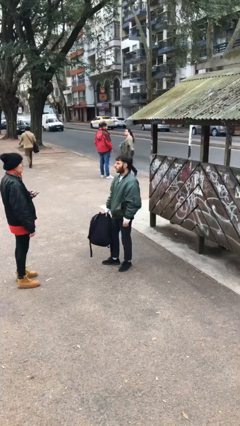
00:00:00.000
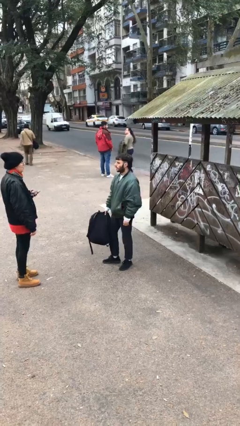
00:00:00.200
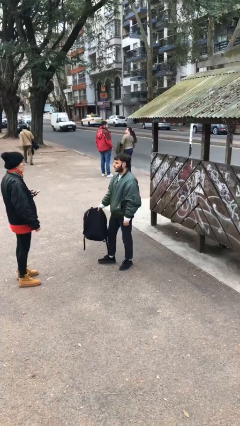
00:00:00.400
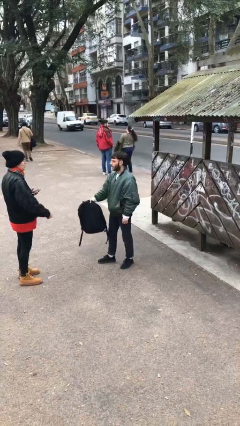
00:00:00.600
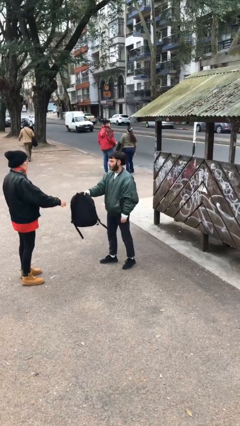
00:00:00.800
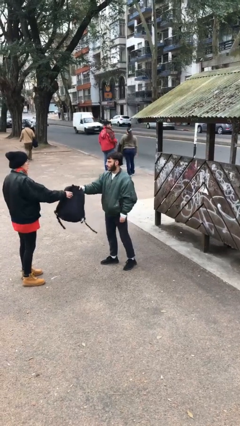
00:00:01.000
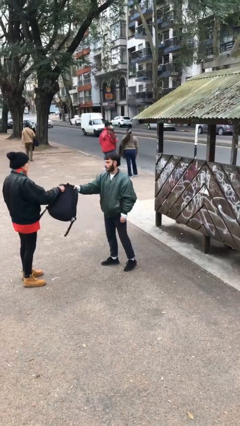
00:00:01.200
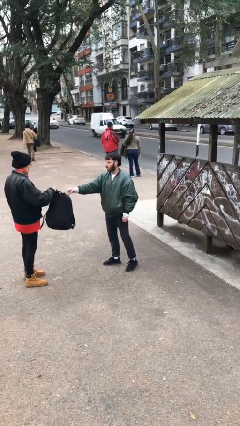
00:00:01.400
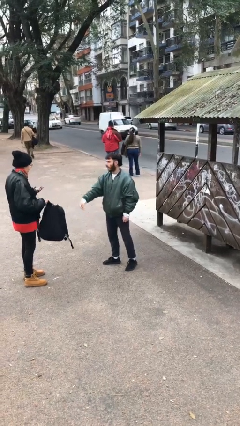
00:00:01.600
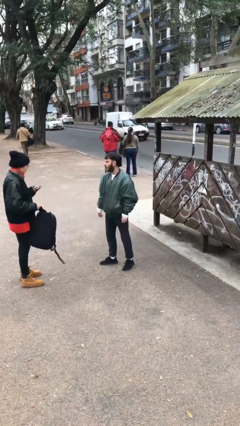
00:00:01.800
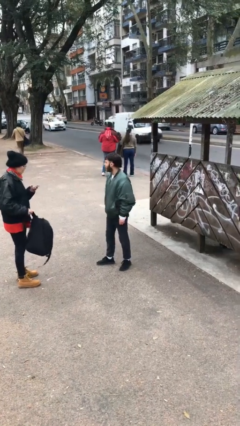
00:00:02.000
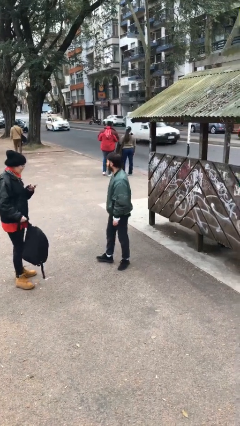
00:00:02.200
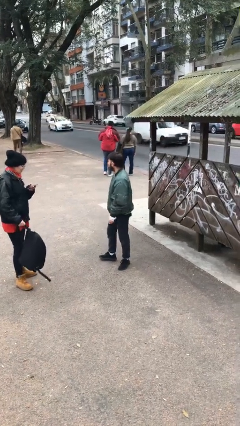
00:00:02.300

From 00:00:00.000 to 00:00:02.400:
person transfers object to person

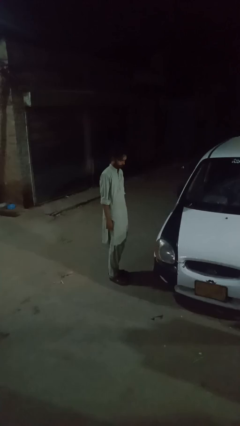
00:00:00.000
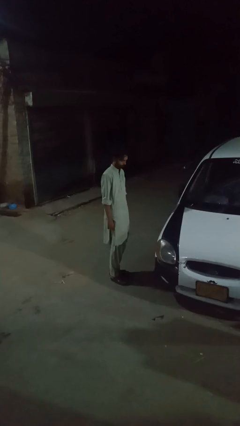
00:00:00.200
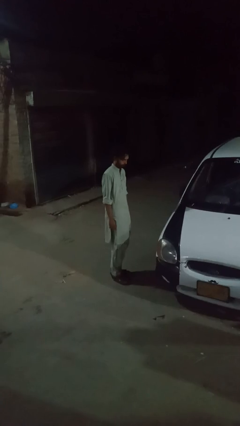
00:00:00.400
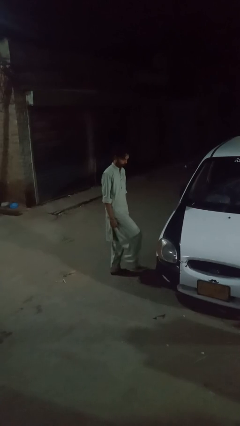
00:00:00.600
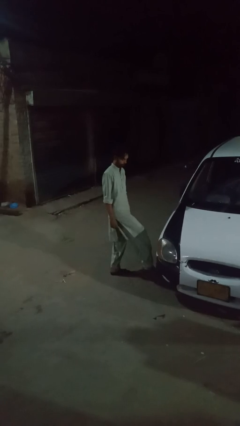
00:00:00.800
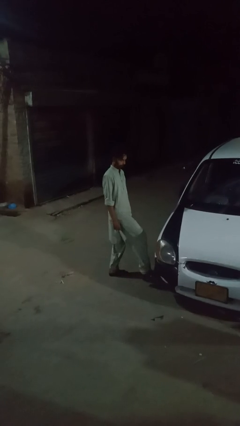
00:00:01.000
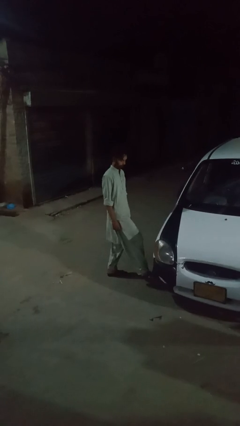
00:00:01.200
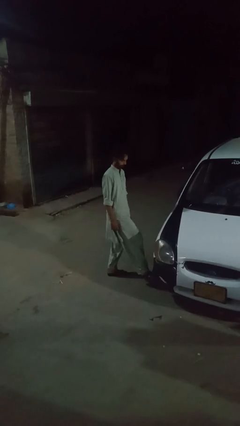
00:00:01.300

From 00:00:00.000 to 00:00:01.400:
person kicks car tires

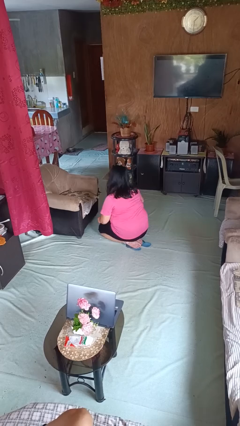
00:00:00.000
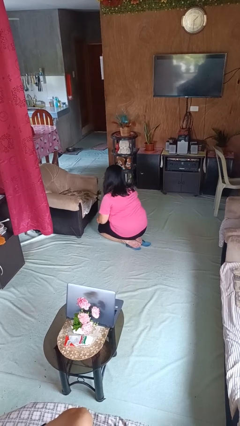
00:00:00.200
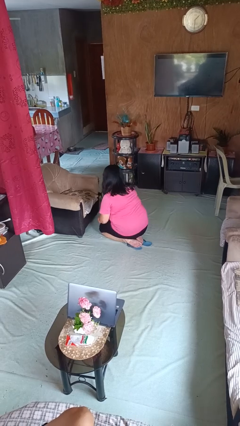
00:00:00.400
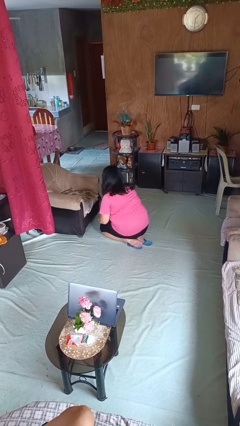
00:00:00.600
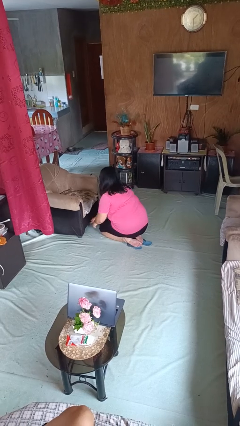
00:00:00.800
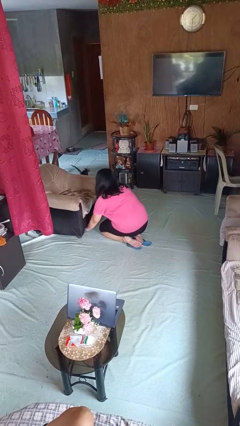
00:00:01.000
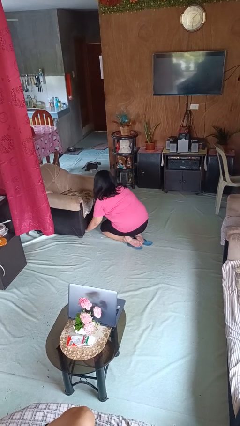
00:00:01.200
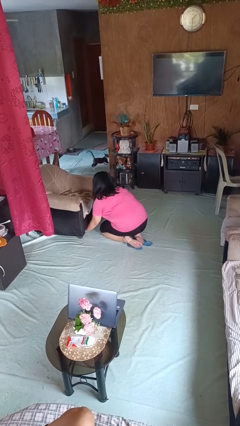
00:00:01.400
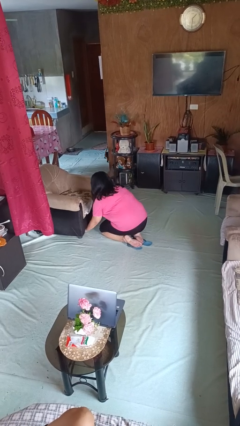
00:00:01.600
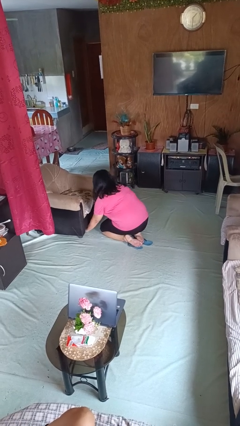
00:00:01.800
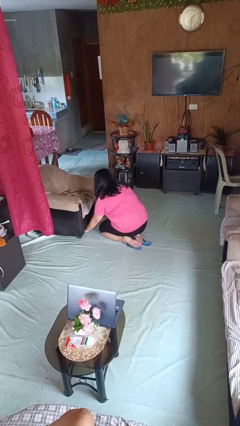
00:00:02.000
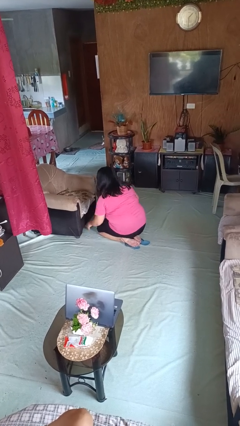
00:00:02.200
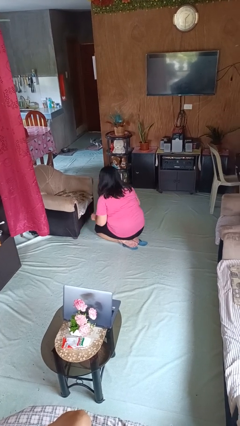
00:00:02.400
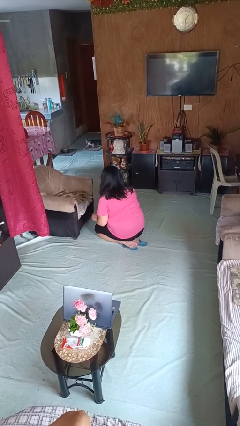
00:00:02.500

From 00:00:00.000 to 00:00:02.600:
person searches under couch

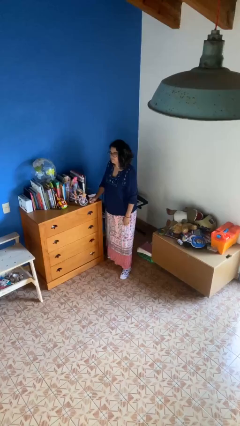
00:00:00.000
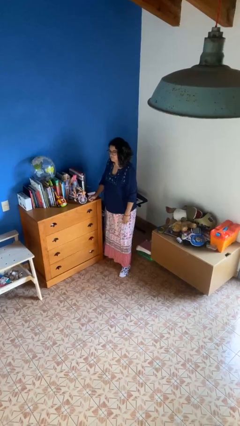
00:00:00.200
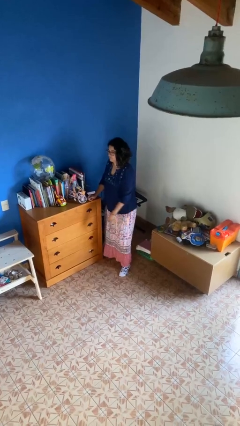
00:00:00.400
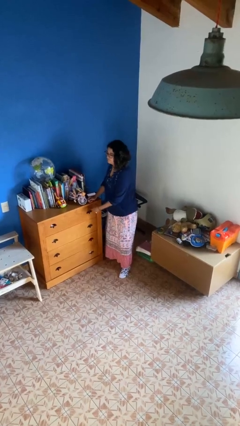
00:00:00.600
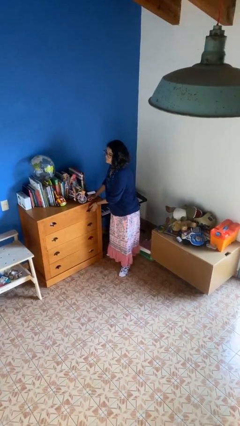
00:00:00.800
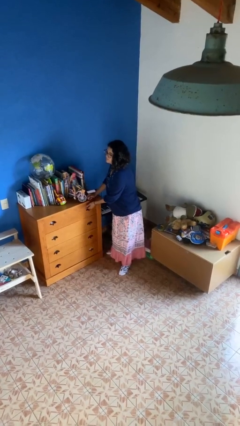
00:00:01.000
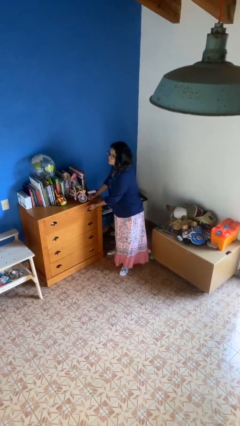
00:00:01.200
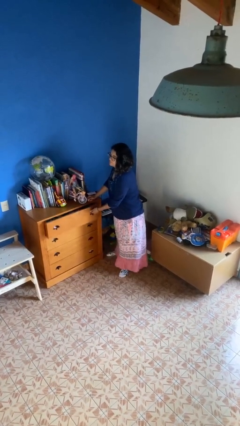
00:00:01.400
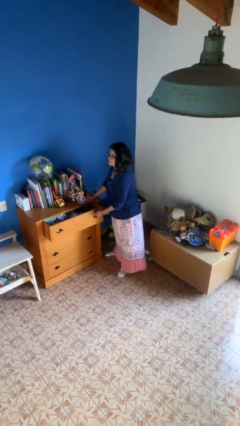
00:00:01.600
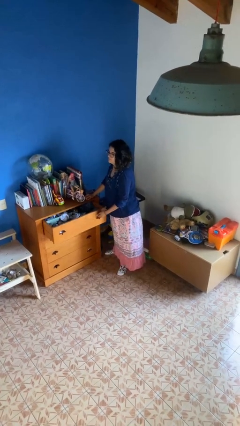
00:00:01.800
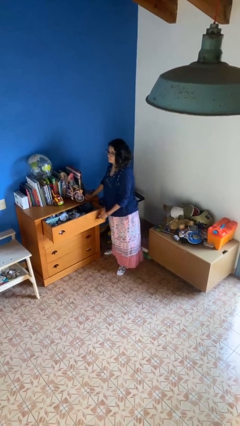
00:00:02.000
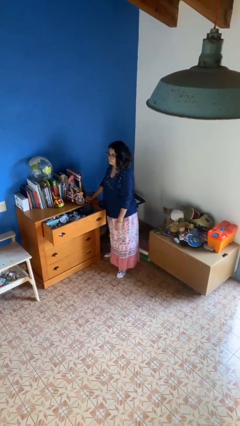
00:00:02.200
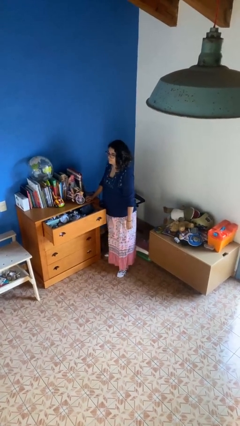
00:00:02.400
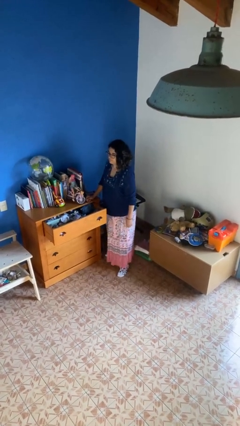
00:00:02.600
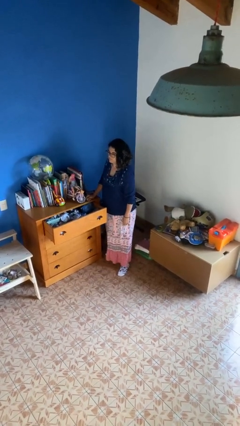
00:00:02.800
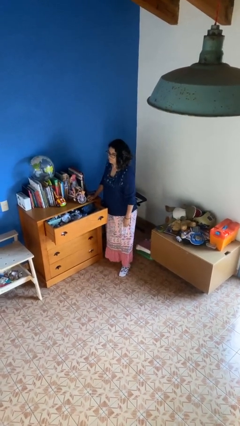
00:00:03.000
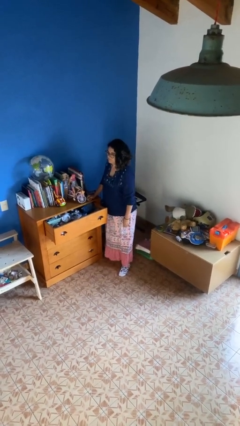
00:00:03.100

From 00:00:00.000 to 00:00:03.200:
person opens dresser drawer

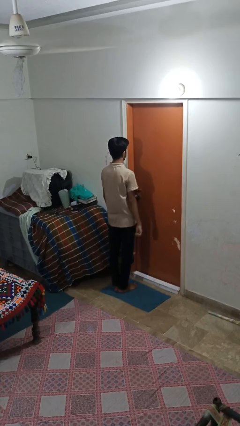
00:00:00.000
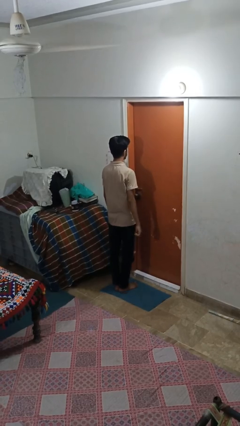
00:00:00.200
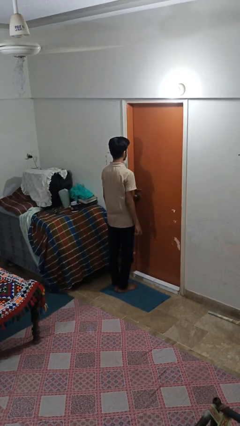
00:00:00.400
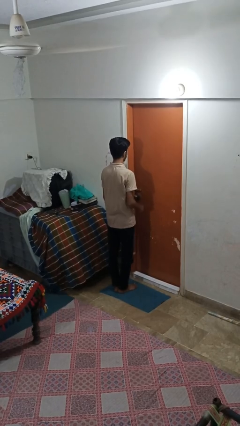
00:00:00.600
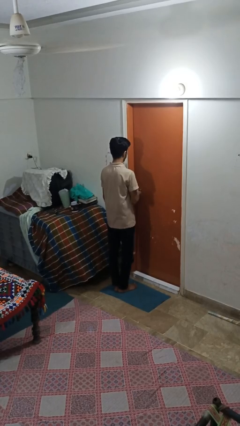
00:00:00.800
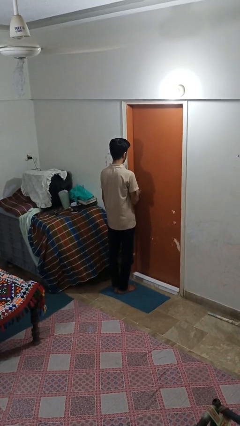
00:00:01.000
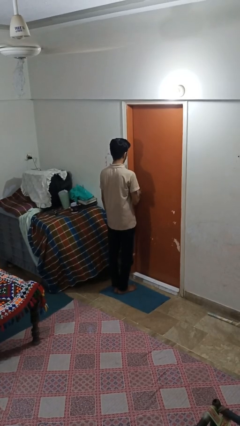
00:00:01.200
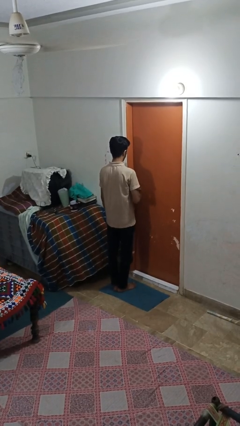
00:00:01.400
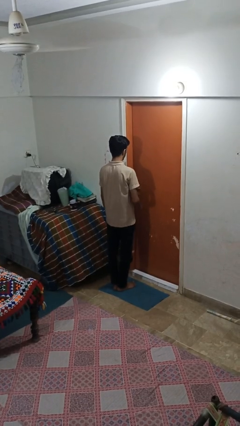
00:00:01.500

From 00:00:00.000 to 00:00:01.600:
person unlocks door with keys

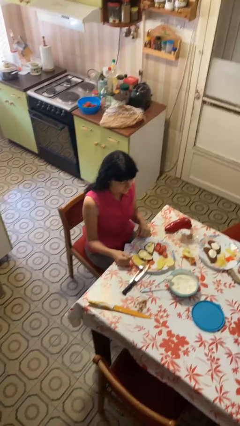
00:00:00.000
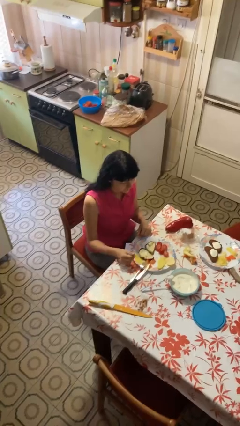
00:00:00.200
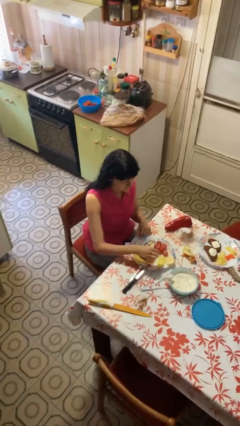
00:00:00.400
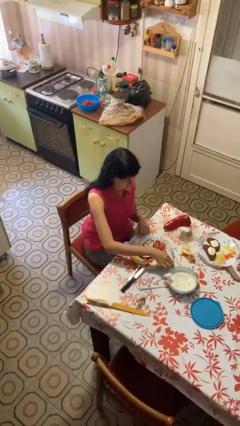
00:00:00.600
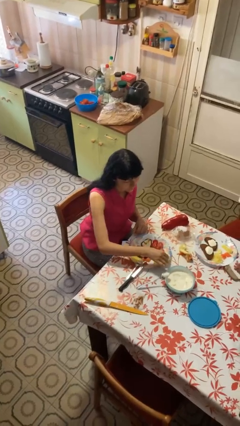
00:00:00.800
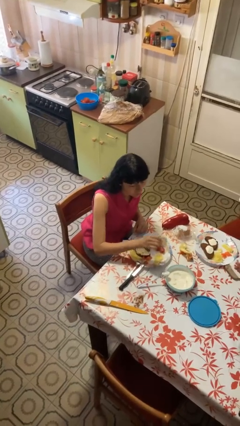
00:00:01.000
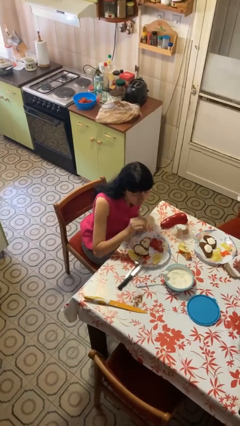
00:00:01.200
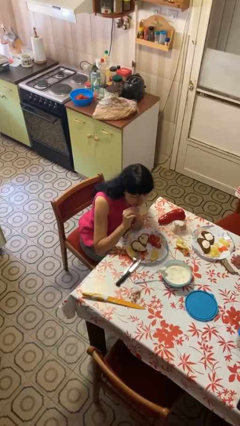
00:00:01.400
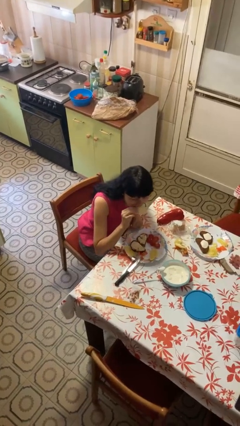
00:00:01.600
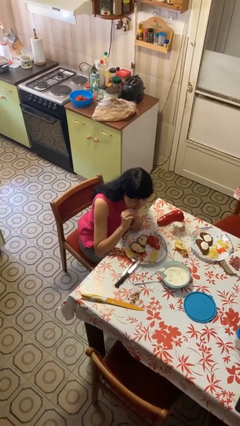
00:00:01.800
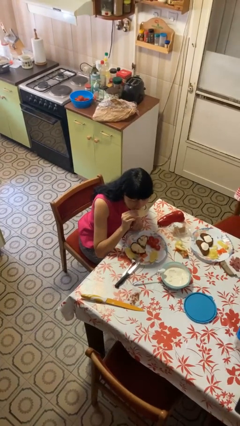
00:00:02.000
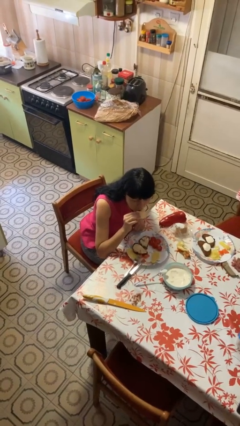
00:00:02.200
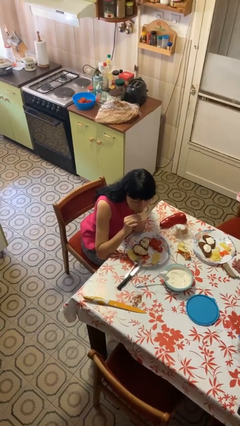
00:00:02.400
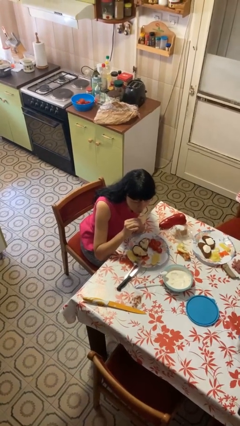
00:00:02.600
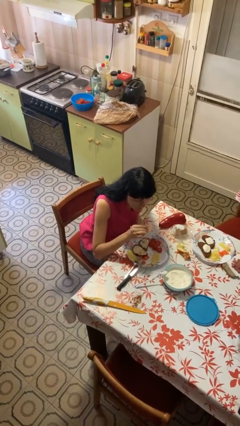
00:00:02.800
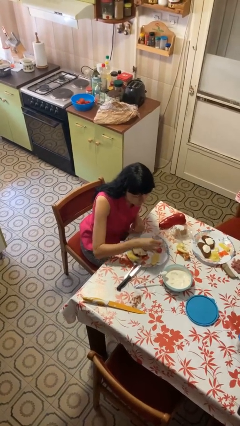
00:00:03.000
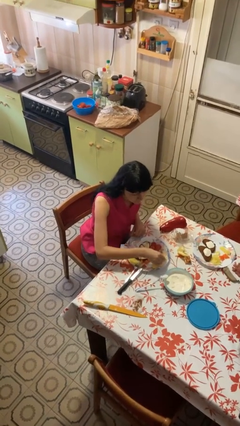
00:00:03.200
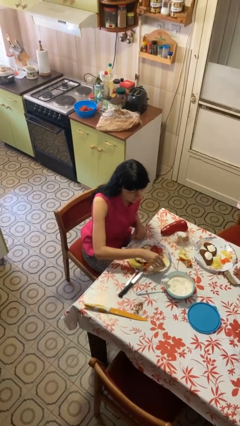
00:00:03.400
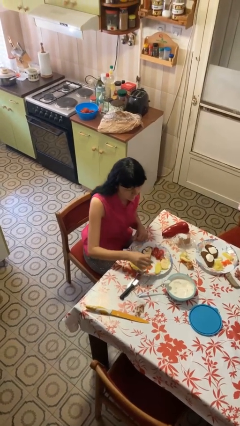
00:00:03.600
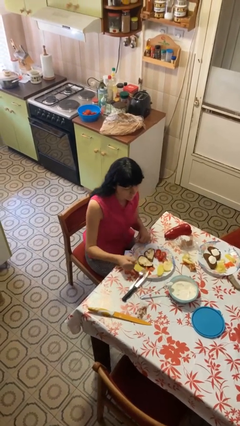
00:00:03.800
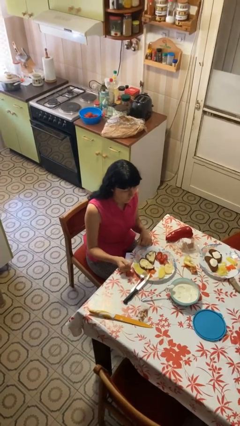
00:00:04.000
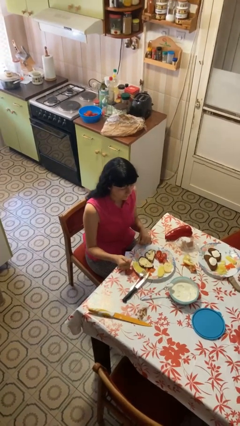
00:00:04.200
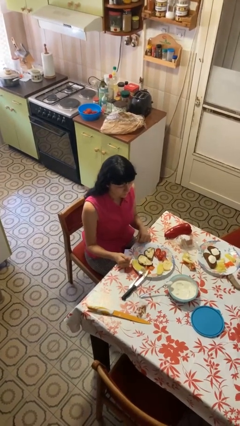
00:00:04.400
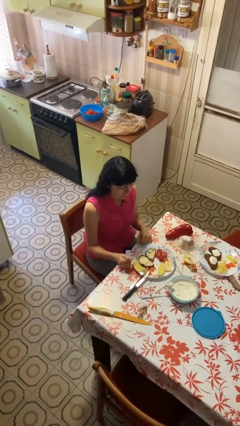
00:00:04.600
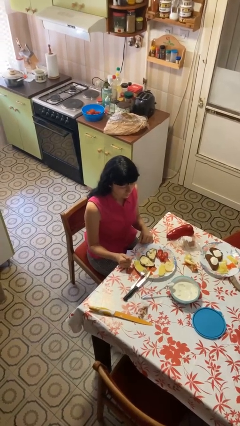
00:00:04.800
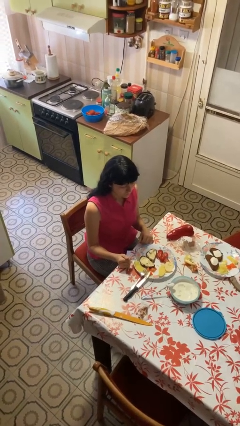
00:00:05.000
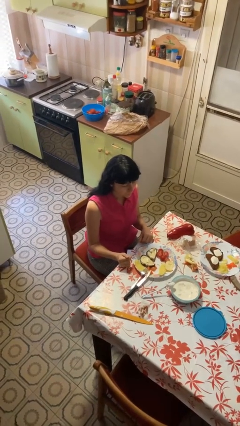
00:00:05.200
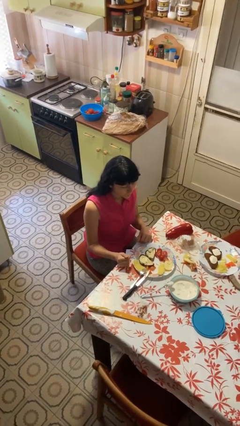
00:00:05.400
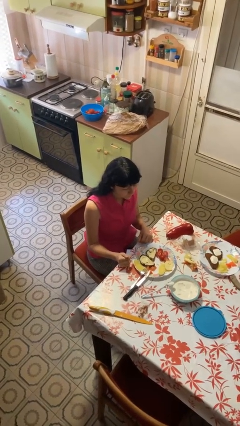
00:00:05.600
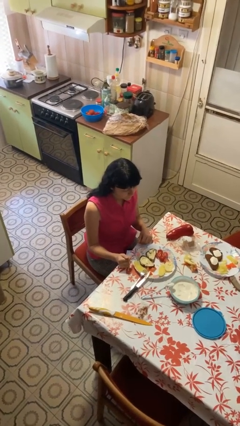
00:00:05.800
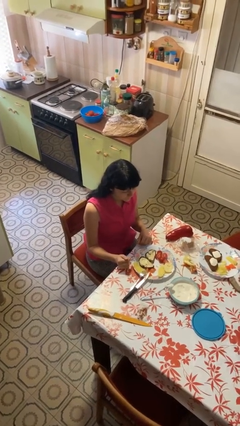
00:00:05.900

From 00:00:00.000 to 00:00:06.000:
person eats with hands

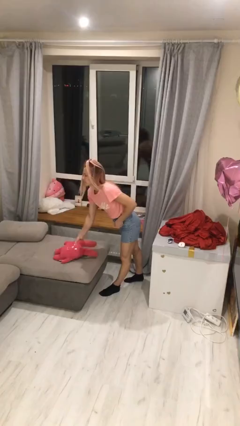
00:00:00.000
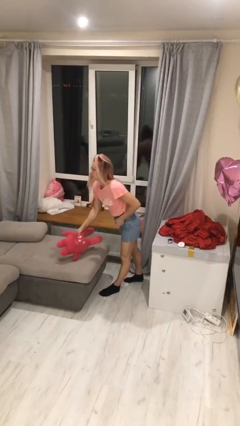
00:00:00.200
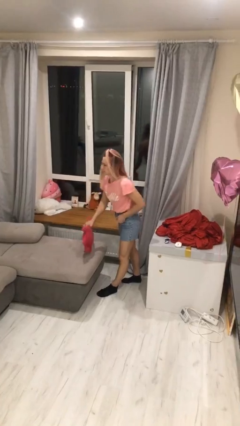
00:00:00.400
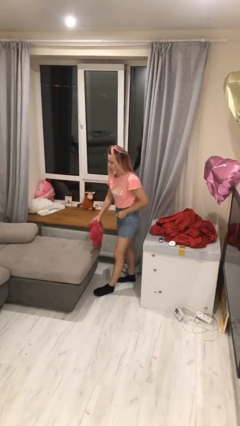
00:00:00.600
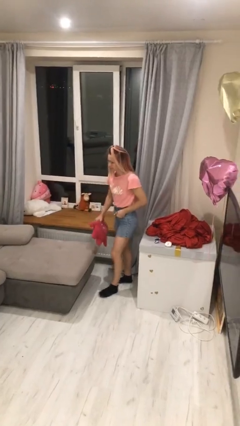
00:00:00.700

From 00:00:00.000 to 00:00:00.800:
person picks up object from bed
